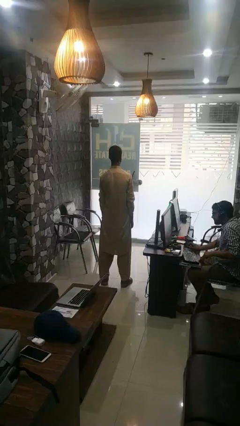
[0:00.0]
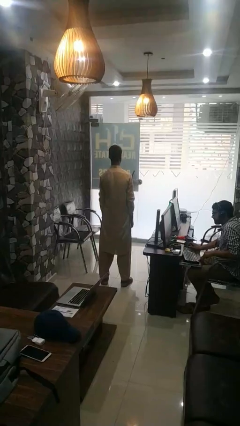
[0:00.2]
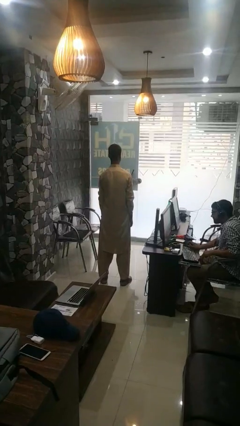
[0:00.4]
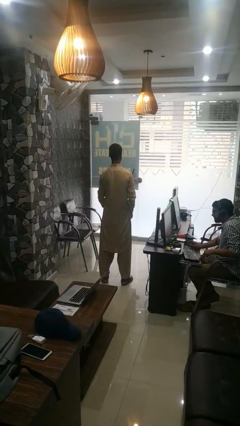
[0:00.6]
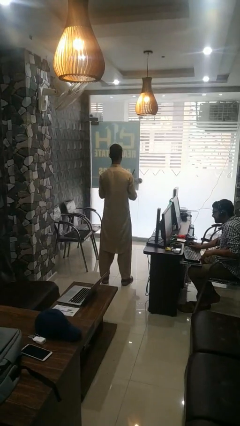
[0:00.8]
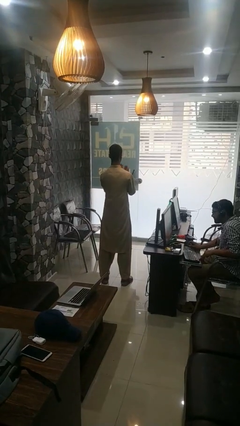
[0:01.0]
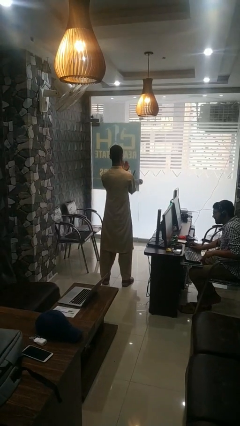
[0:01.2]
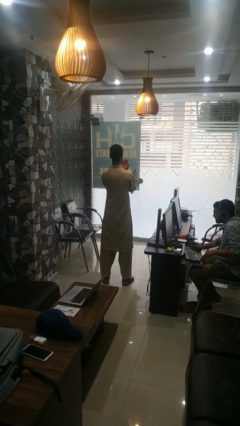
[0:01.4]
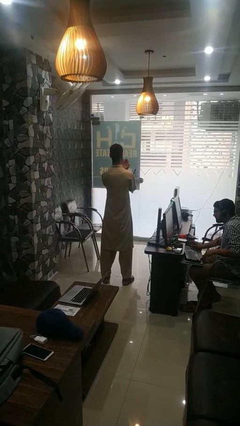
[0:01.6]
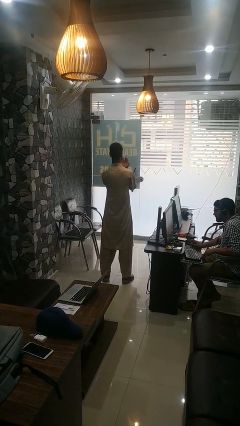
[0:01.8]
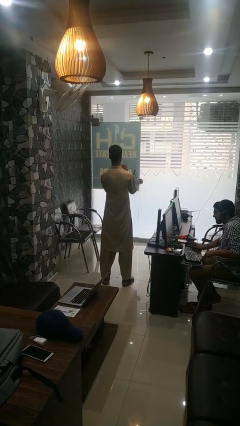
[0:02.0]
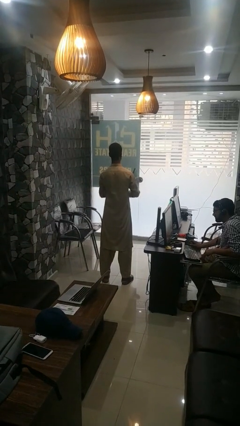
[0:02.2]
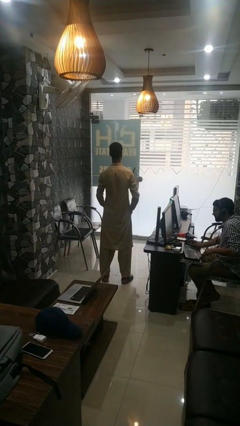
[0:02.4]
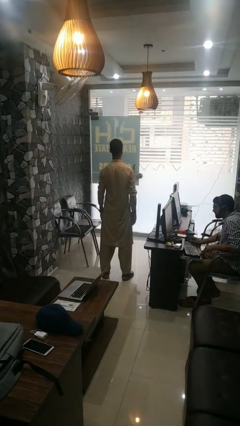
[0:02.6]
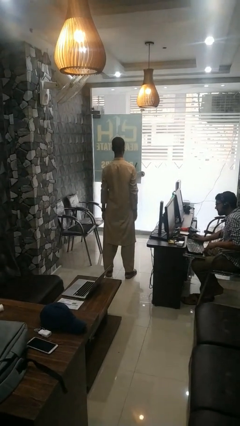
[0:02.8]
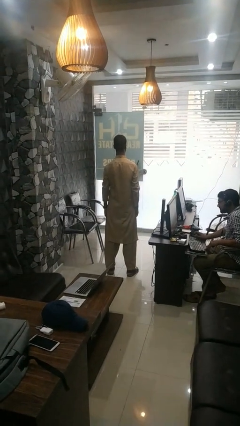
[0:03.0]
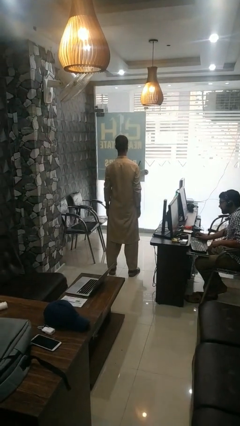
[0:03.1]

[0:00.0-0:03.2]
person prays

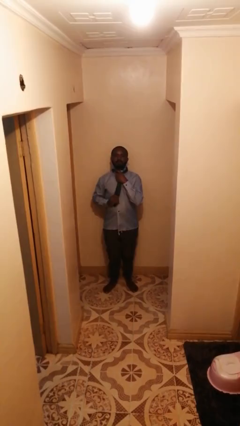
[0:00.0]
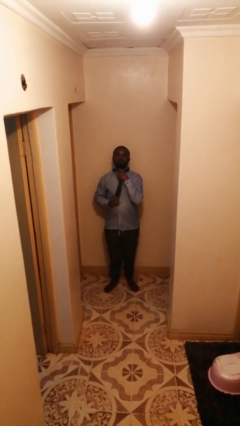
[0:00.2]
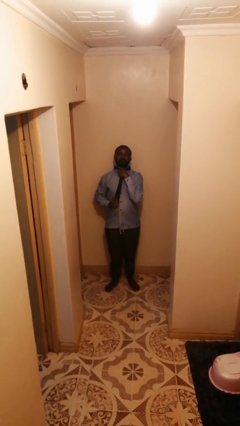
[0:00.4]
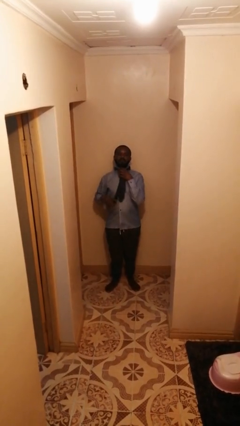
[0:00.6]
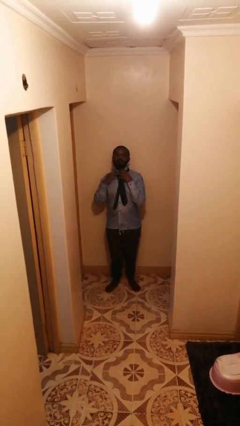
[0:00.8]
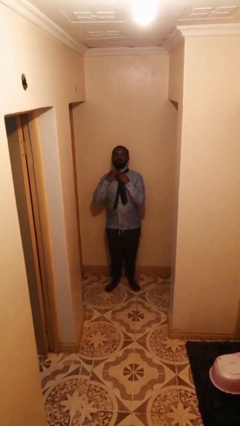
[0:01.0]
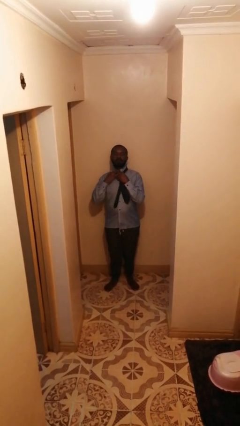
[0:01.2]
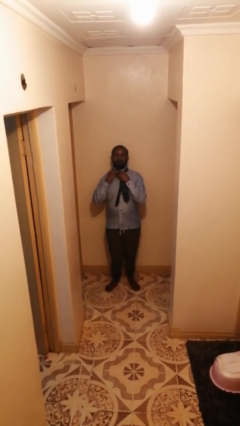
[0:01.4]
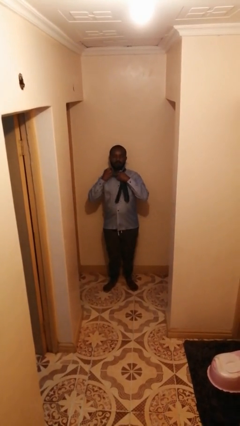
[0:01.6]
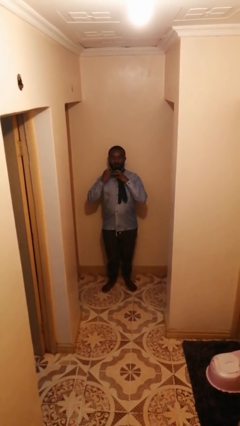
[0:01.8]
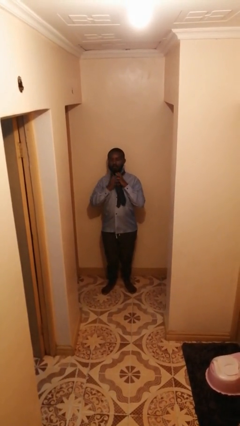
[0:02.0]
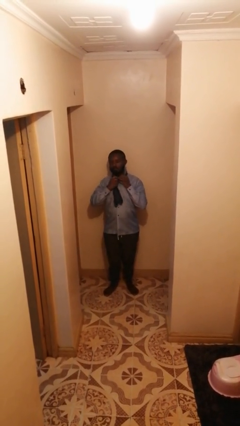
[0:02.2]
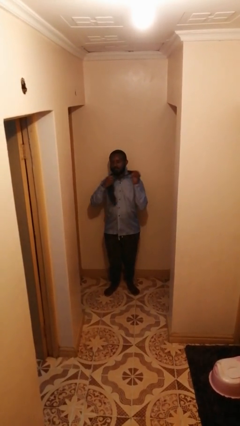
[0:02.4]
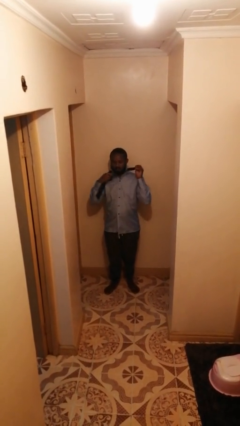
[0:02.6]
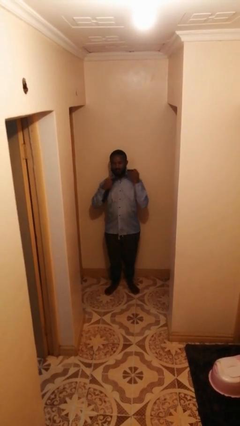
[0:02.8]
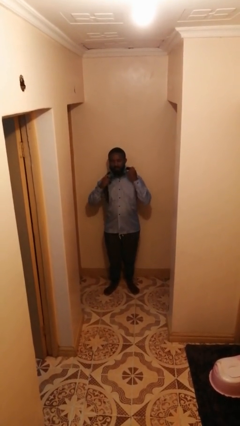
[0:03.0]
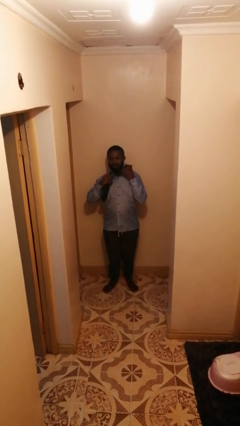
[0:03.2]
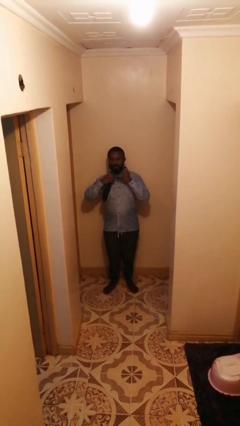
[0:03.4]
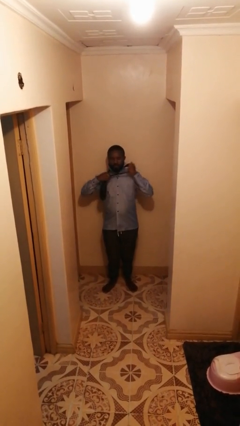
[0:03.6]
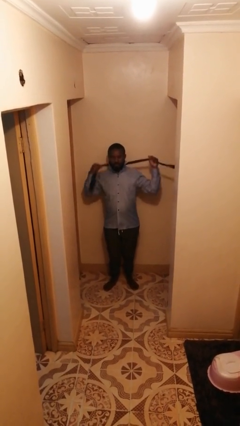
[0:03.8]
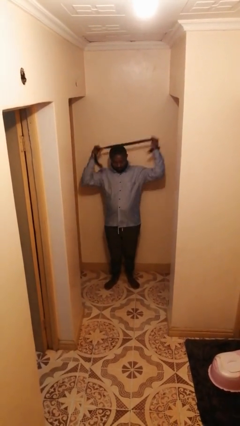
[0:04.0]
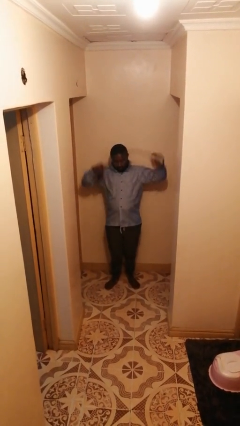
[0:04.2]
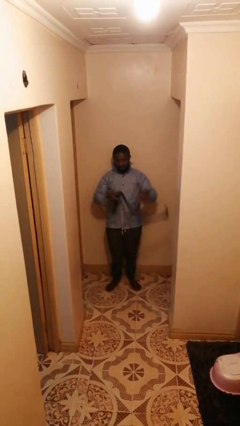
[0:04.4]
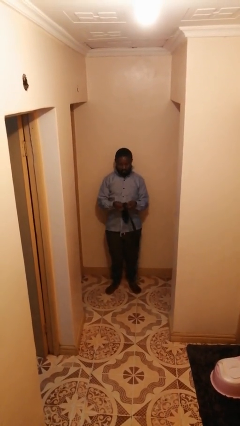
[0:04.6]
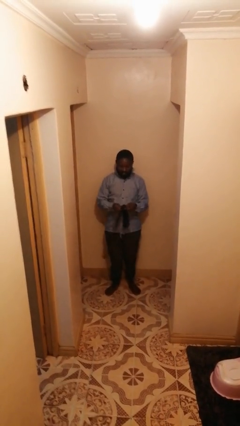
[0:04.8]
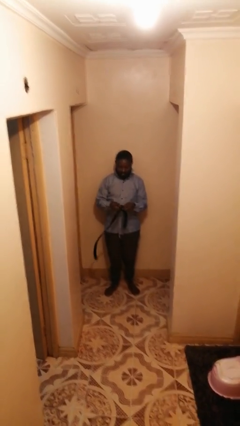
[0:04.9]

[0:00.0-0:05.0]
person takes off necktie

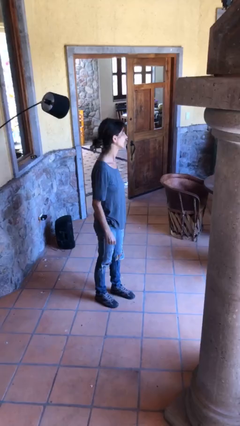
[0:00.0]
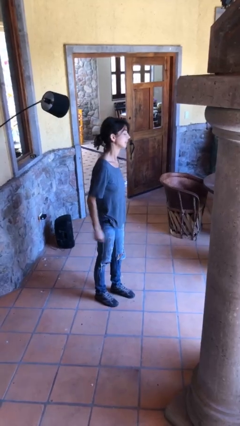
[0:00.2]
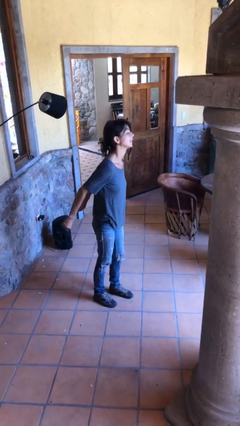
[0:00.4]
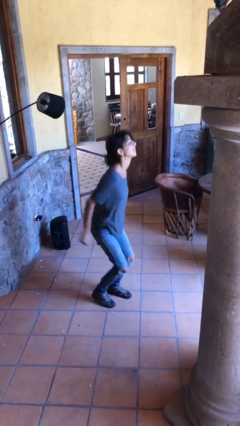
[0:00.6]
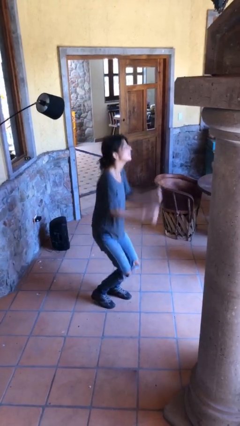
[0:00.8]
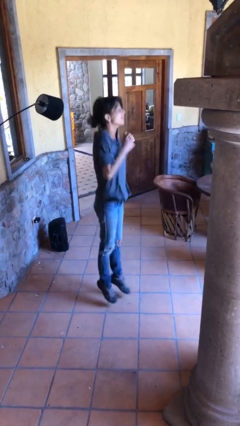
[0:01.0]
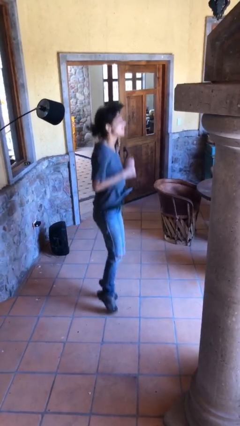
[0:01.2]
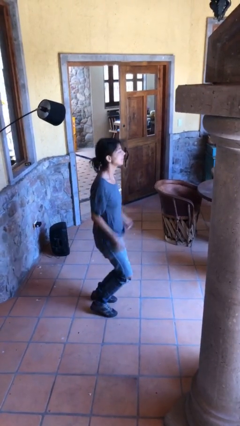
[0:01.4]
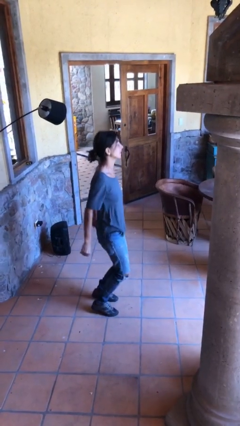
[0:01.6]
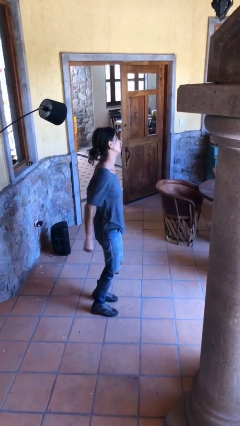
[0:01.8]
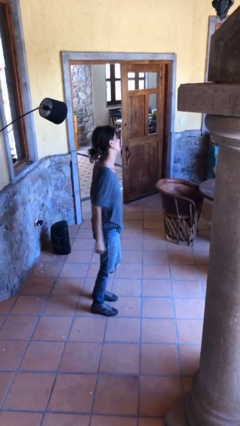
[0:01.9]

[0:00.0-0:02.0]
person jumps

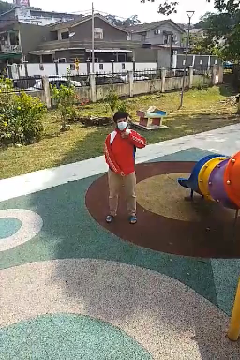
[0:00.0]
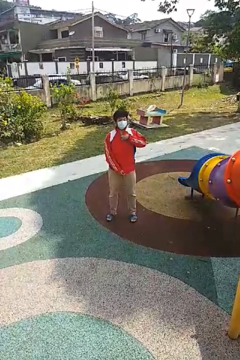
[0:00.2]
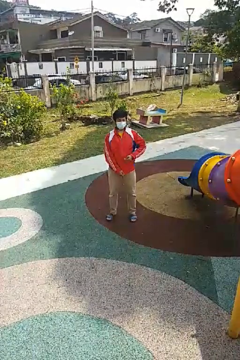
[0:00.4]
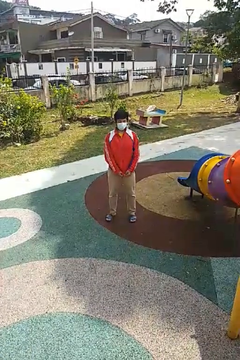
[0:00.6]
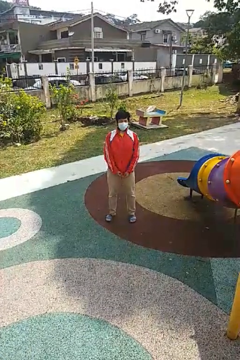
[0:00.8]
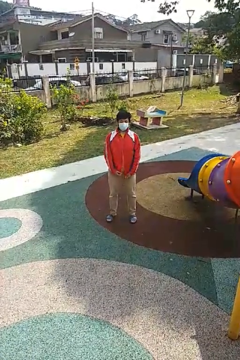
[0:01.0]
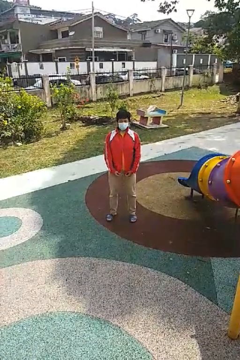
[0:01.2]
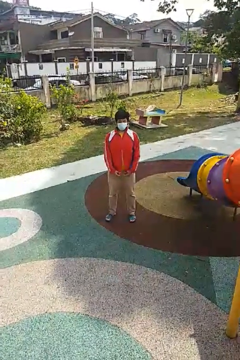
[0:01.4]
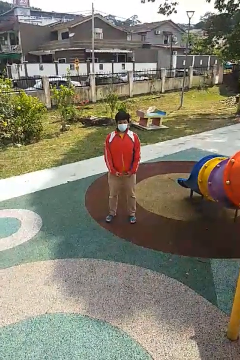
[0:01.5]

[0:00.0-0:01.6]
person unzips jacket

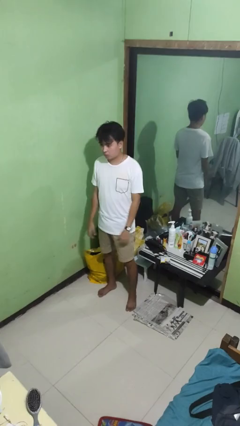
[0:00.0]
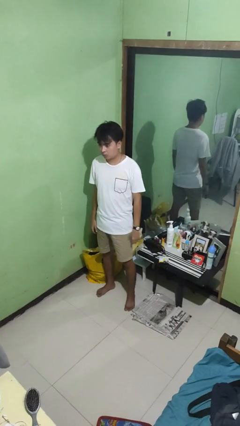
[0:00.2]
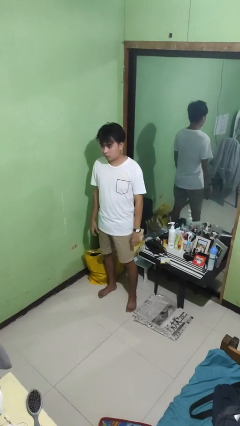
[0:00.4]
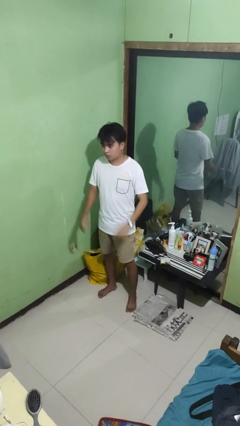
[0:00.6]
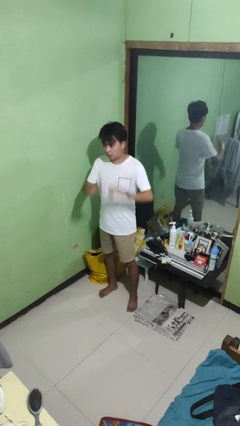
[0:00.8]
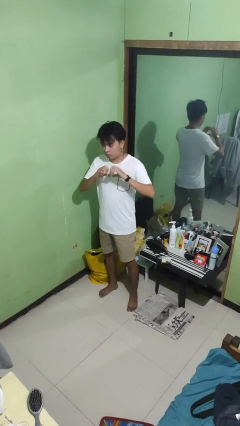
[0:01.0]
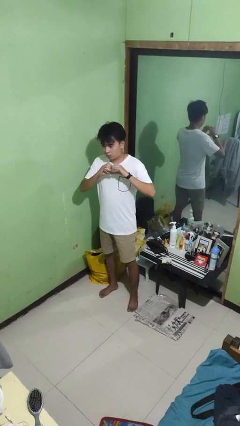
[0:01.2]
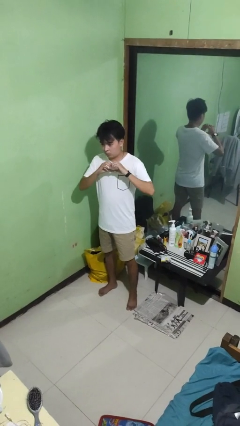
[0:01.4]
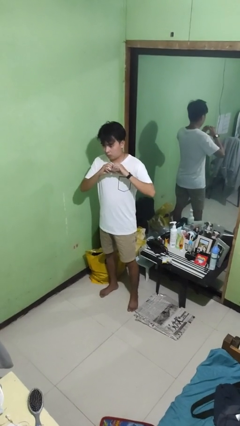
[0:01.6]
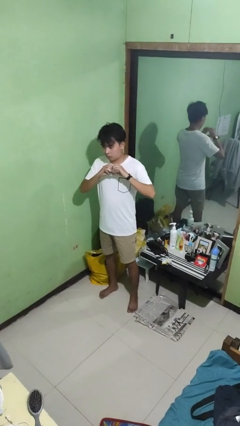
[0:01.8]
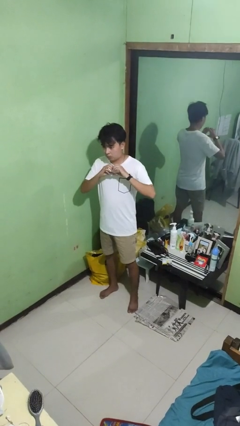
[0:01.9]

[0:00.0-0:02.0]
person gestures heart

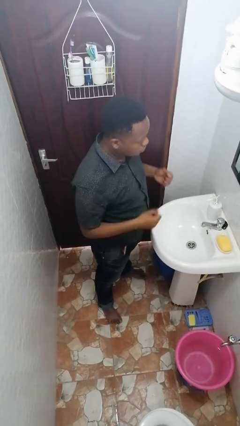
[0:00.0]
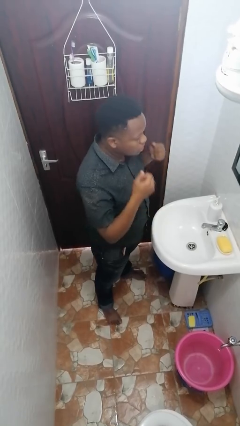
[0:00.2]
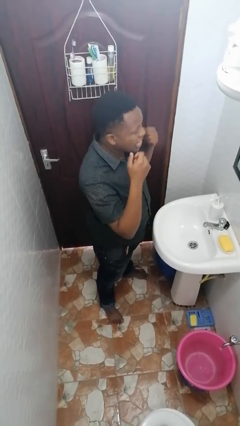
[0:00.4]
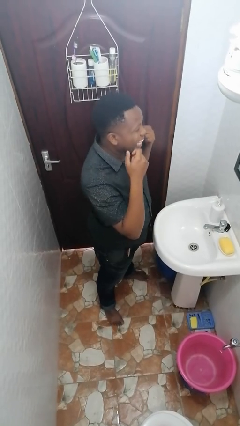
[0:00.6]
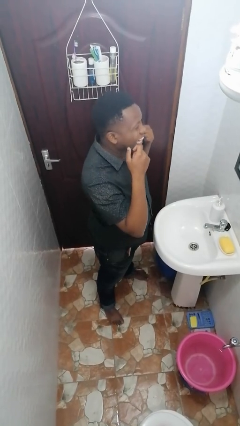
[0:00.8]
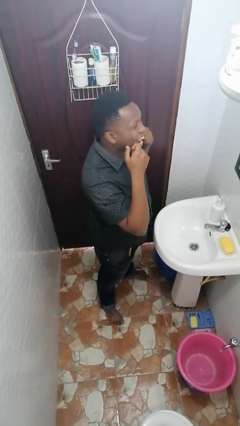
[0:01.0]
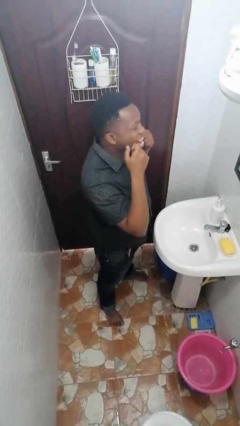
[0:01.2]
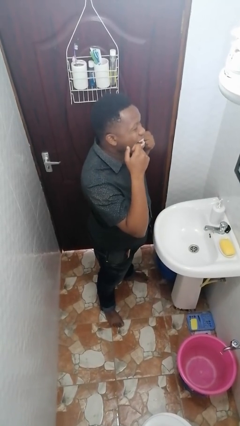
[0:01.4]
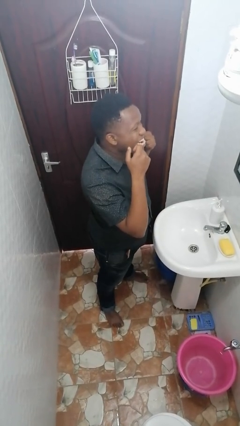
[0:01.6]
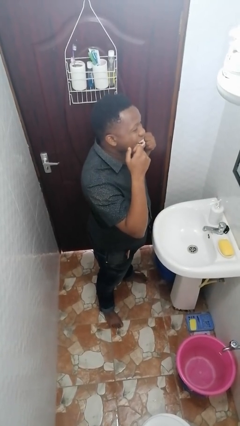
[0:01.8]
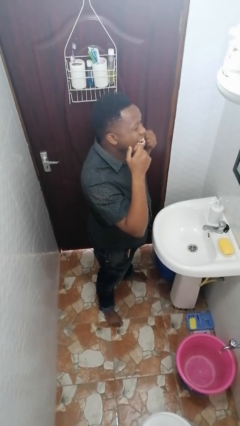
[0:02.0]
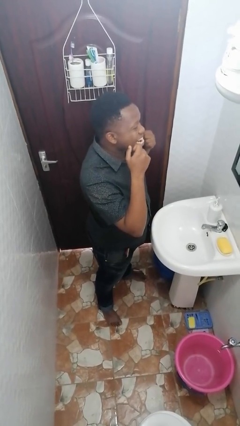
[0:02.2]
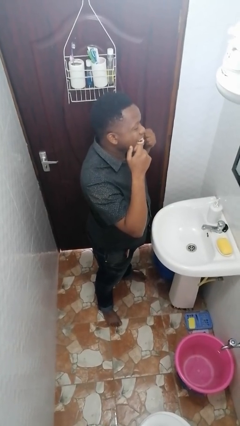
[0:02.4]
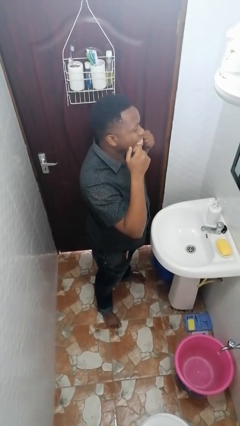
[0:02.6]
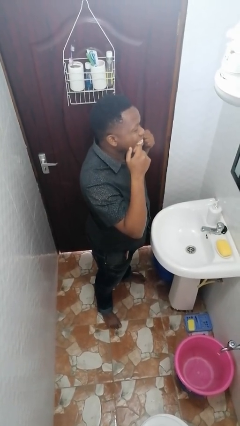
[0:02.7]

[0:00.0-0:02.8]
person flosses

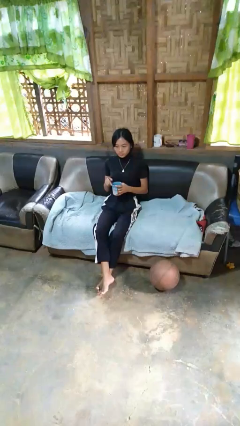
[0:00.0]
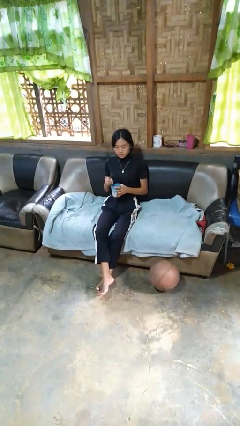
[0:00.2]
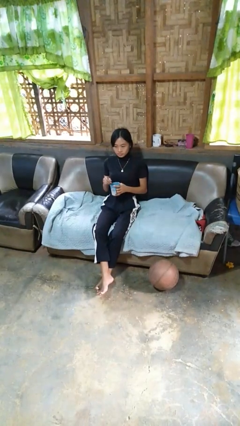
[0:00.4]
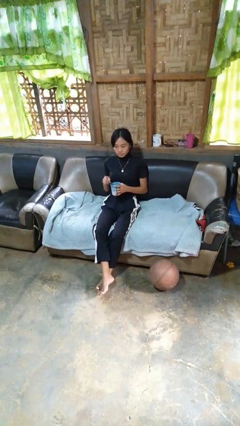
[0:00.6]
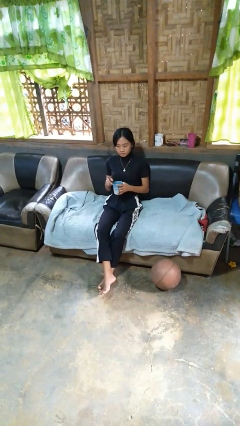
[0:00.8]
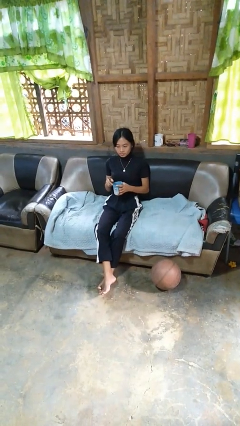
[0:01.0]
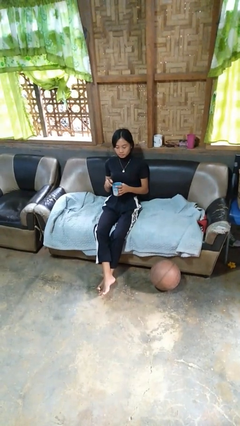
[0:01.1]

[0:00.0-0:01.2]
person stirs mug
